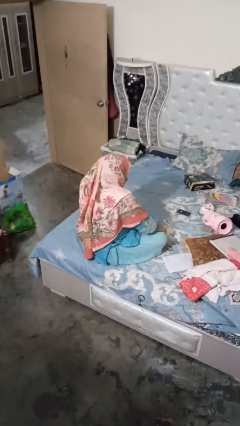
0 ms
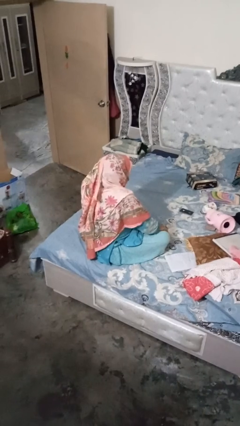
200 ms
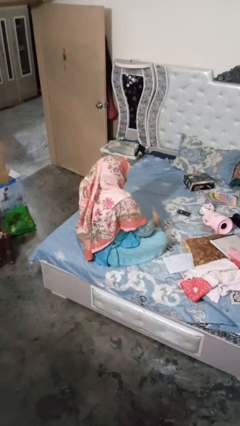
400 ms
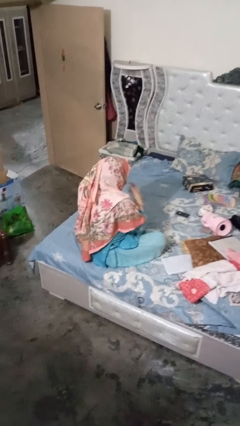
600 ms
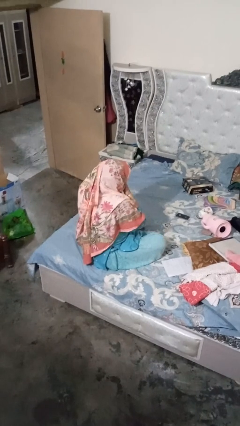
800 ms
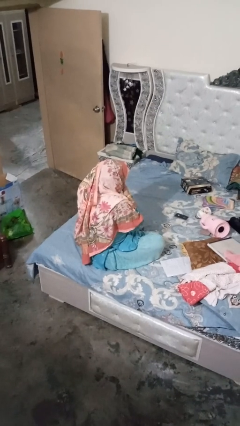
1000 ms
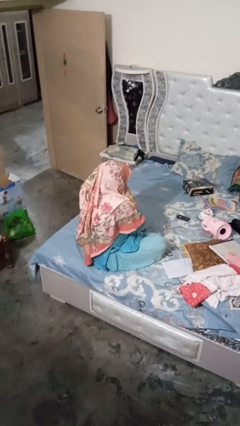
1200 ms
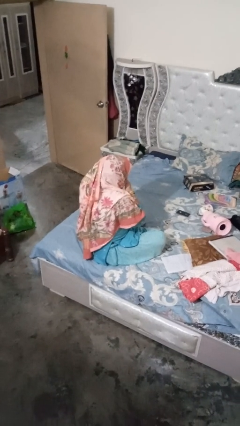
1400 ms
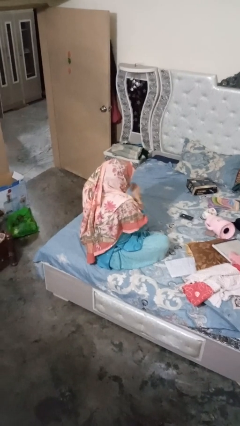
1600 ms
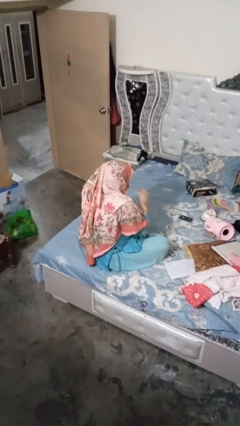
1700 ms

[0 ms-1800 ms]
person strokes chin

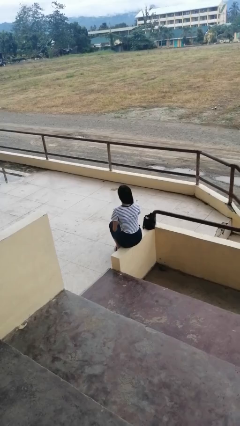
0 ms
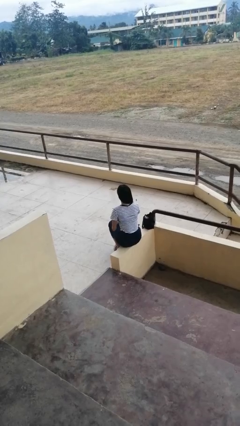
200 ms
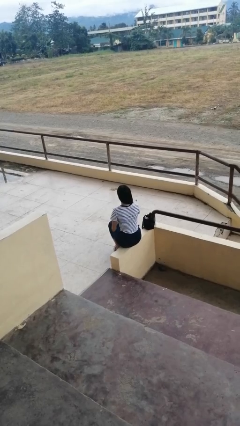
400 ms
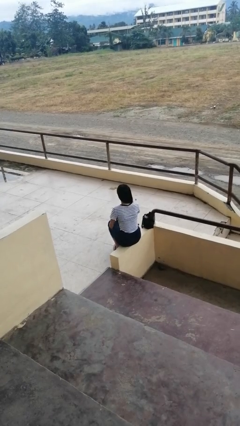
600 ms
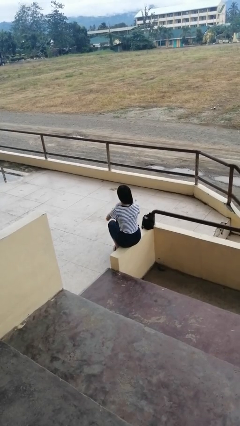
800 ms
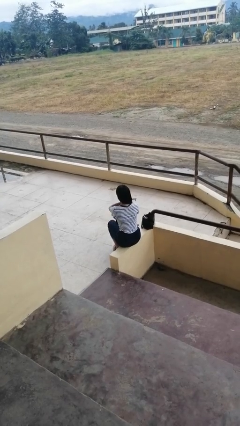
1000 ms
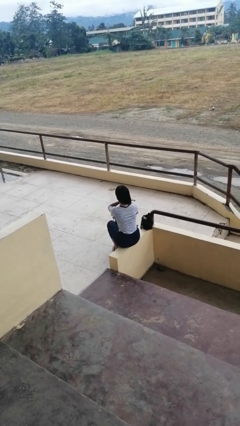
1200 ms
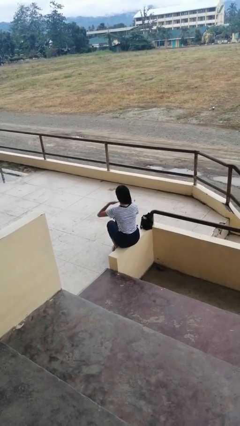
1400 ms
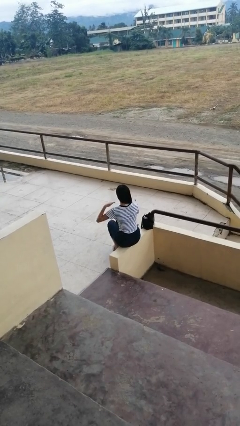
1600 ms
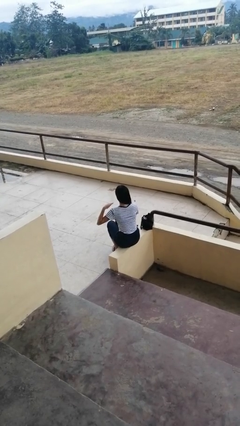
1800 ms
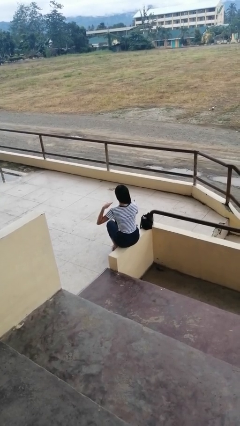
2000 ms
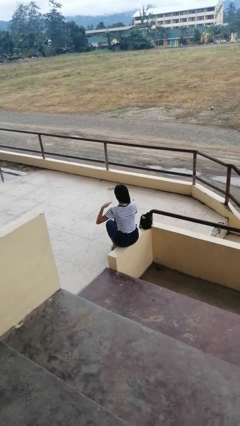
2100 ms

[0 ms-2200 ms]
person gestures cut

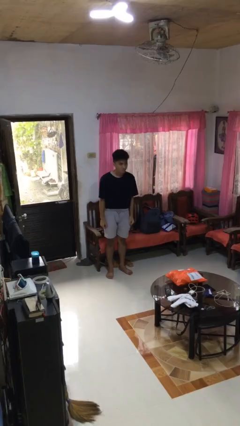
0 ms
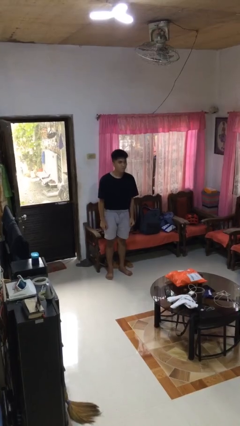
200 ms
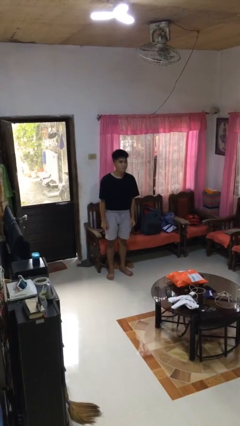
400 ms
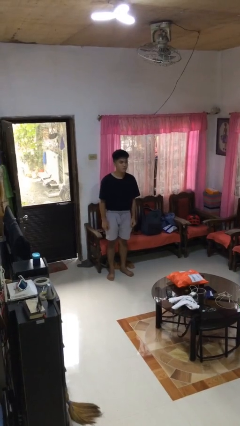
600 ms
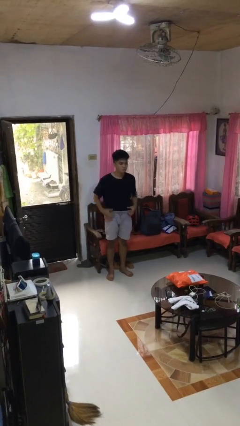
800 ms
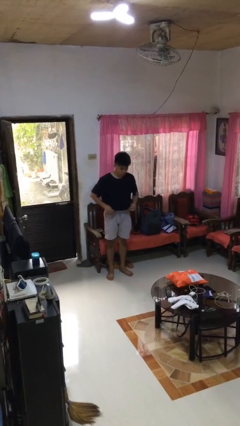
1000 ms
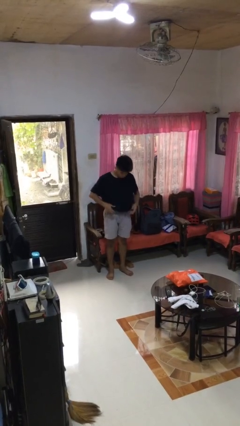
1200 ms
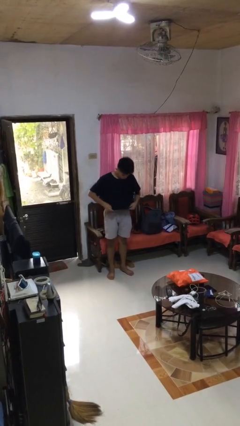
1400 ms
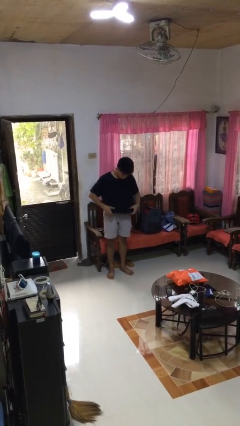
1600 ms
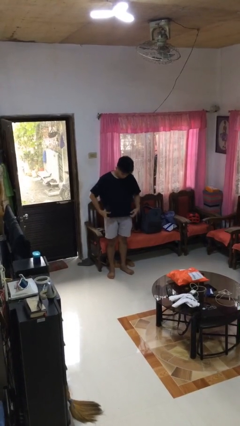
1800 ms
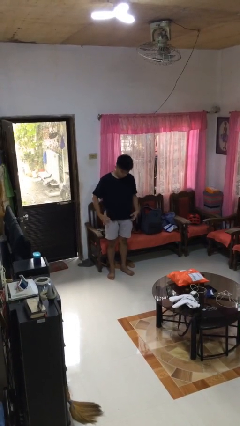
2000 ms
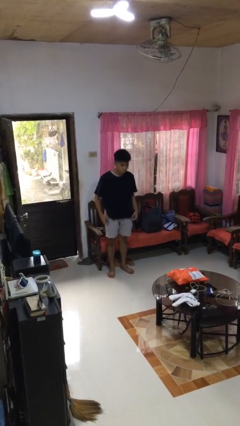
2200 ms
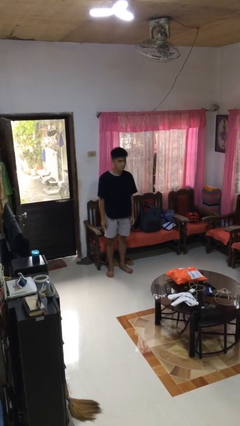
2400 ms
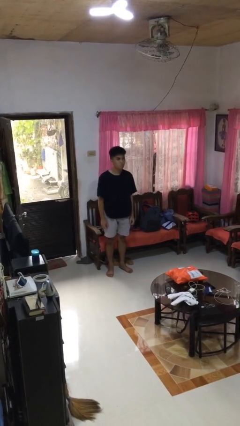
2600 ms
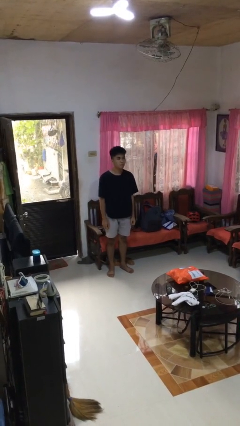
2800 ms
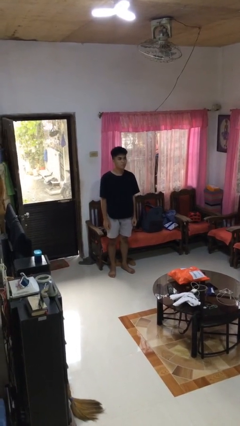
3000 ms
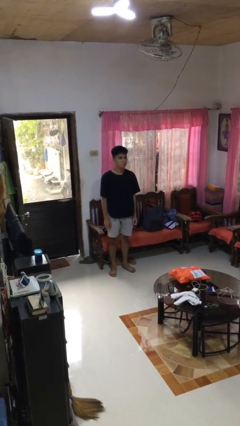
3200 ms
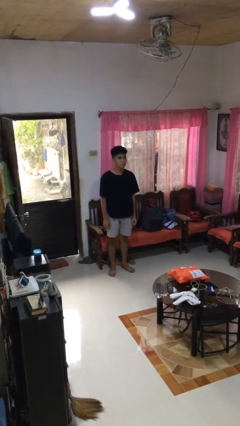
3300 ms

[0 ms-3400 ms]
person untucks shirt

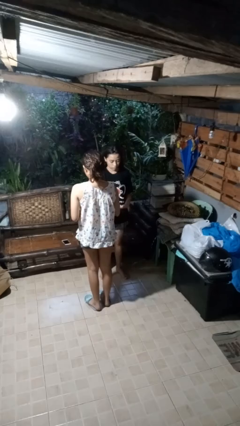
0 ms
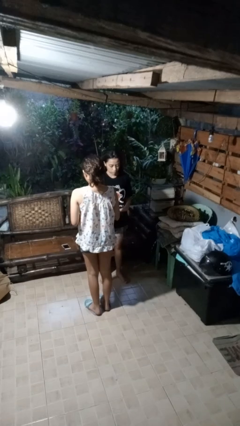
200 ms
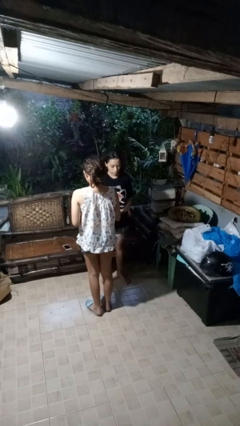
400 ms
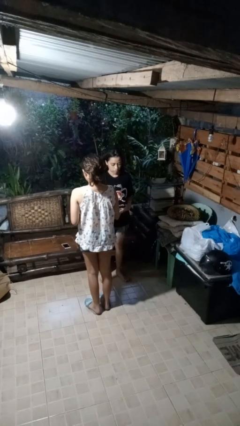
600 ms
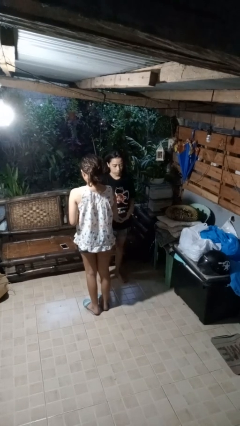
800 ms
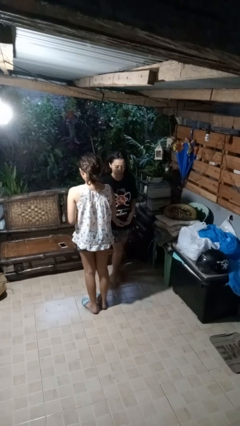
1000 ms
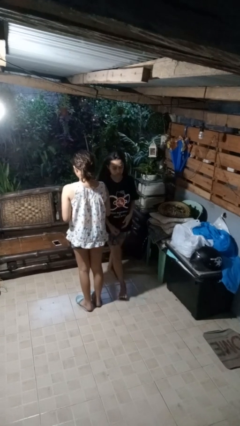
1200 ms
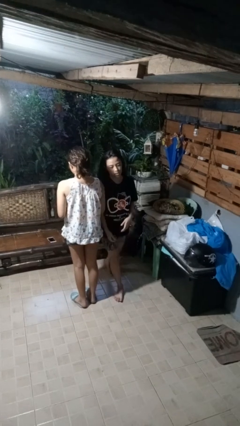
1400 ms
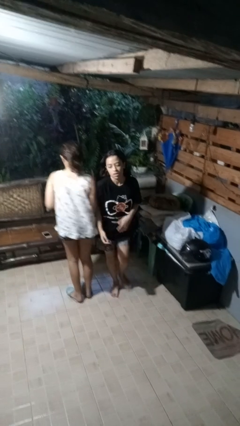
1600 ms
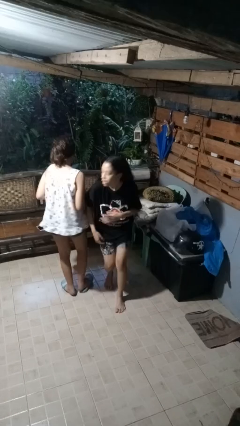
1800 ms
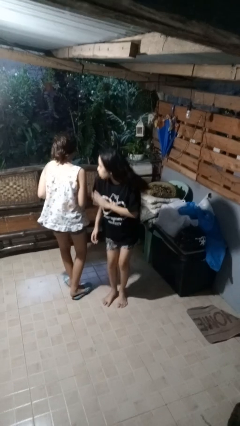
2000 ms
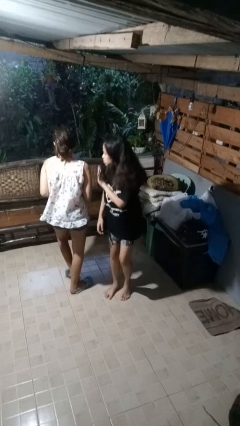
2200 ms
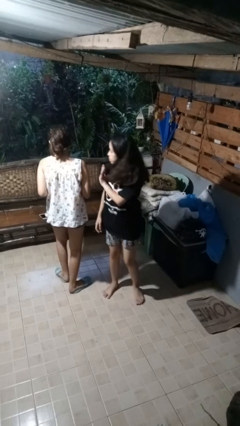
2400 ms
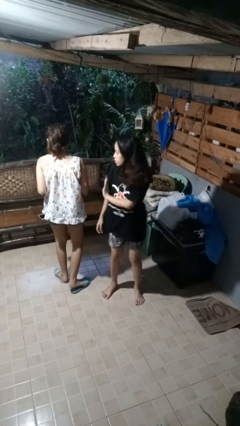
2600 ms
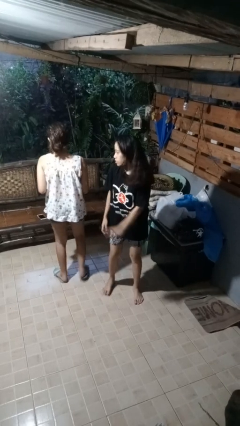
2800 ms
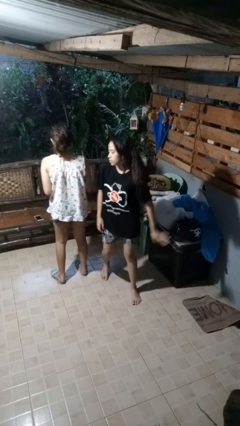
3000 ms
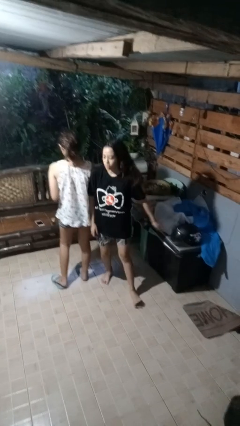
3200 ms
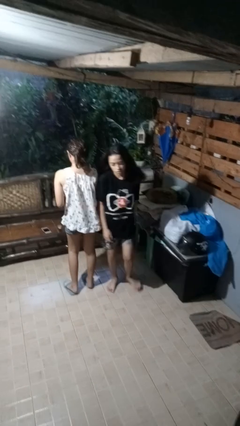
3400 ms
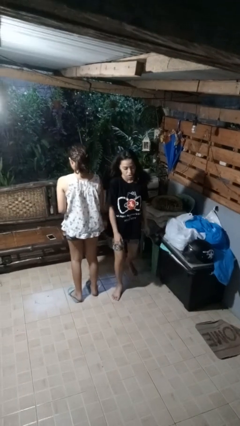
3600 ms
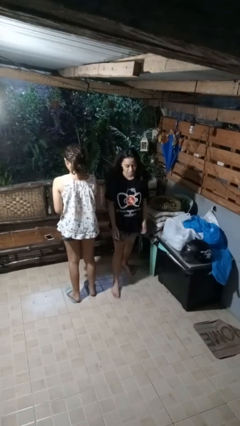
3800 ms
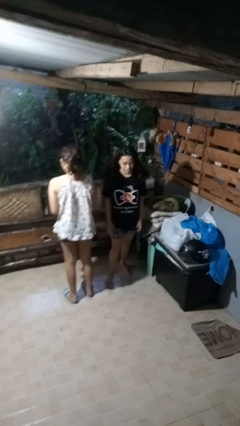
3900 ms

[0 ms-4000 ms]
person bumps into person

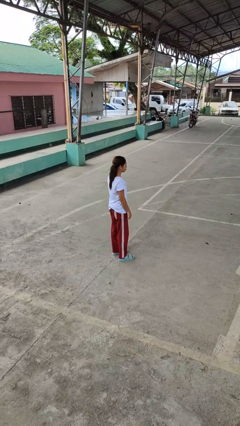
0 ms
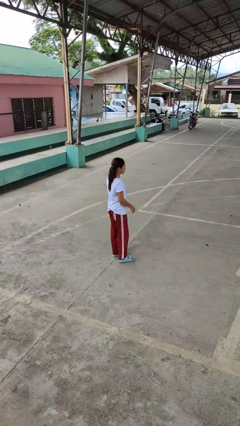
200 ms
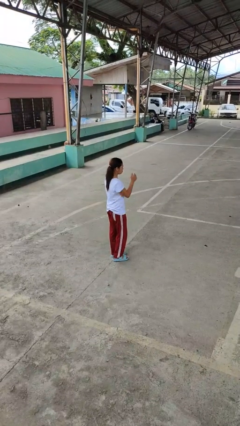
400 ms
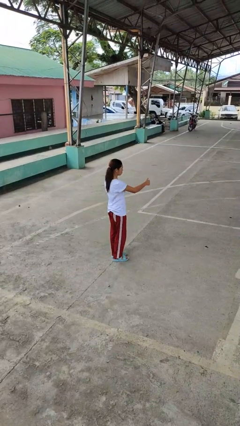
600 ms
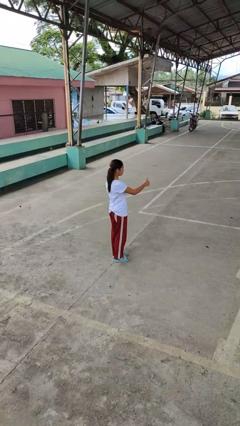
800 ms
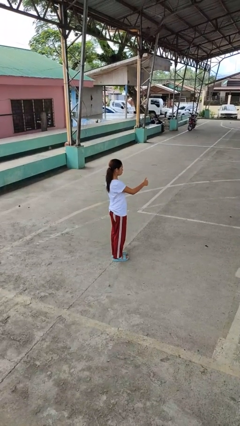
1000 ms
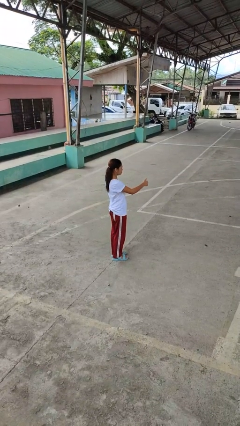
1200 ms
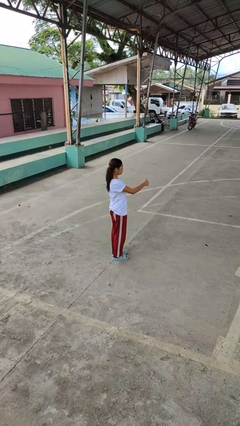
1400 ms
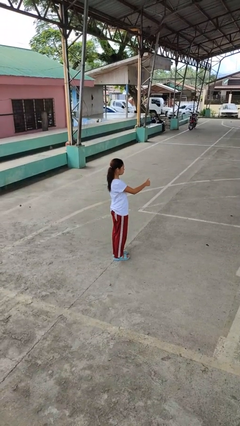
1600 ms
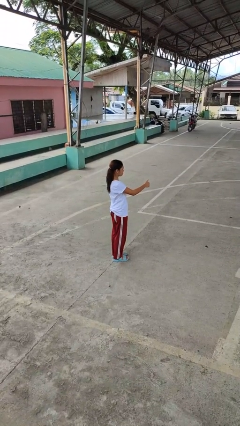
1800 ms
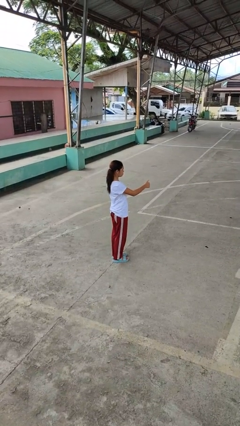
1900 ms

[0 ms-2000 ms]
person gestures thumbs up

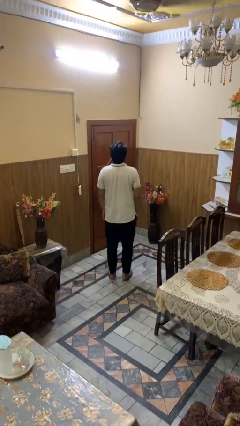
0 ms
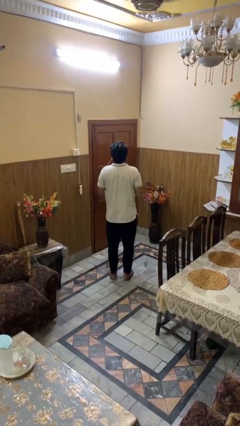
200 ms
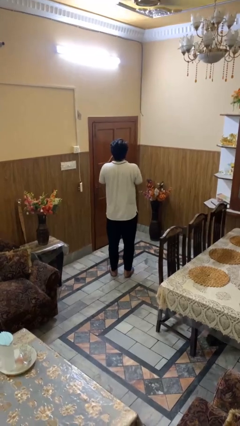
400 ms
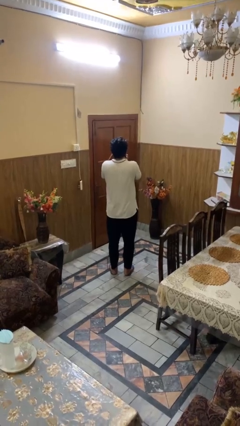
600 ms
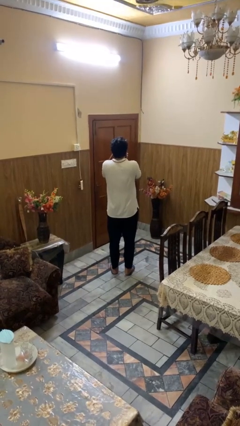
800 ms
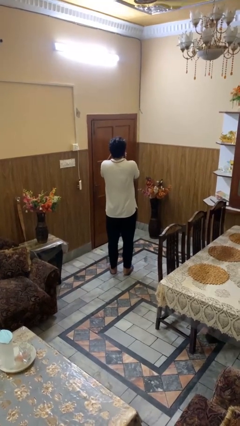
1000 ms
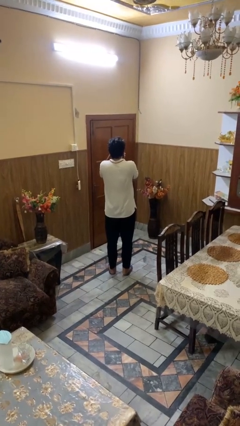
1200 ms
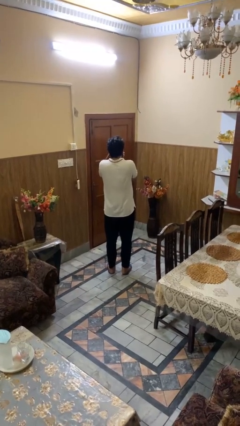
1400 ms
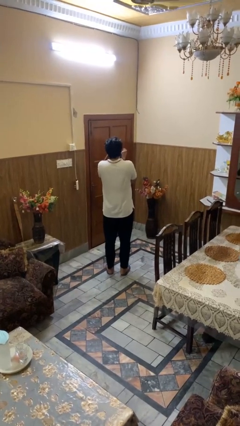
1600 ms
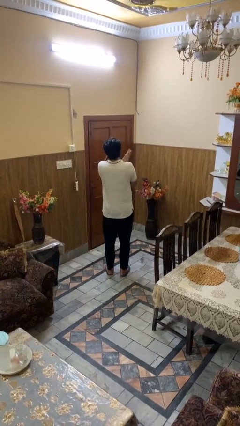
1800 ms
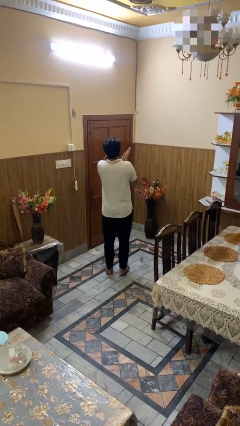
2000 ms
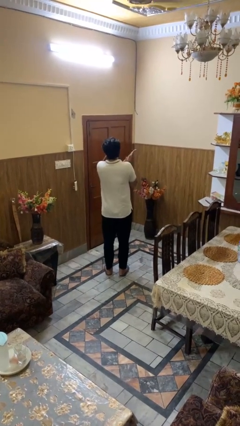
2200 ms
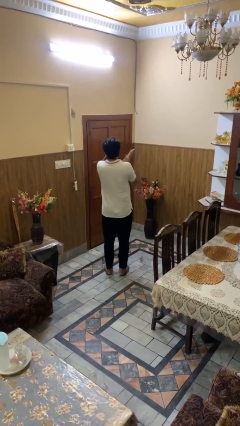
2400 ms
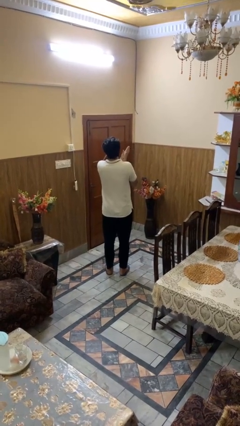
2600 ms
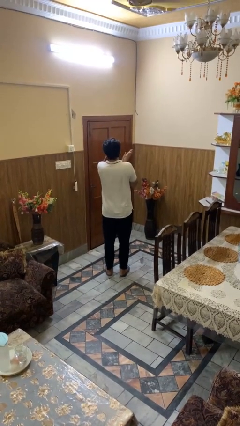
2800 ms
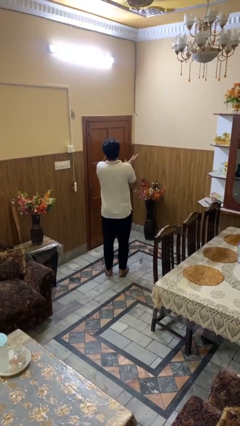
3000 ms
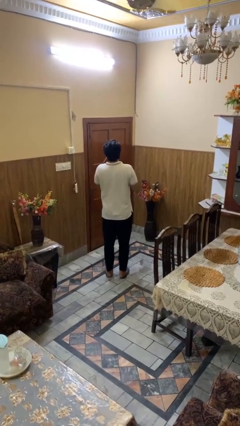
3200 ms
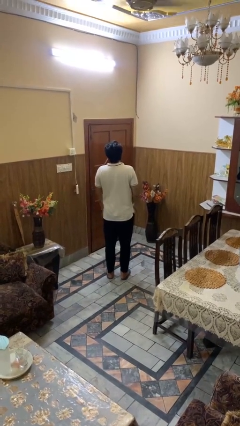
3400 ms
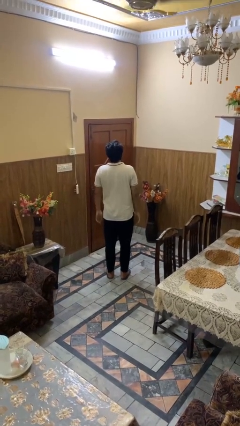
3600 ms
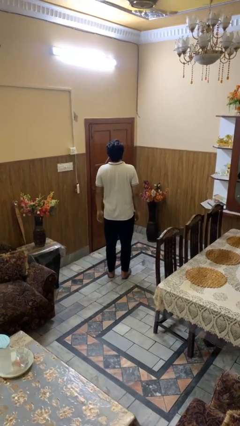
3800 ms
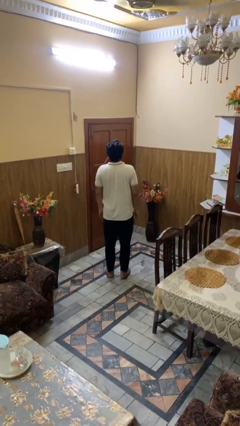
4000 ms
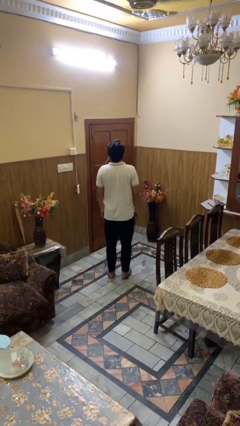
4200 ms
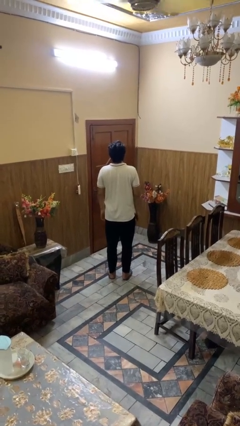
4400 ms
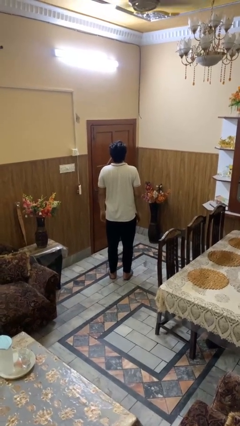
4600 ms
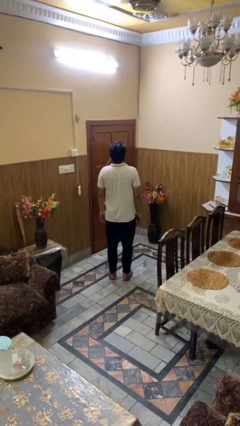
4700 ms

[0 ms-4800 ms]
person blows into hands
